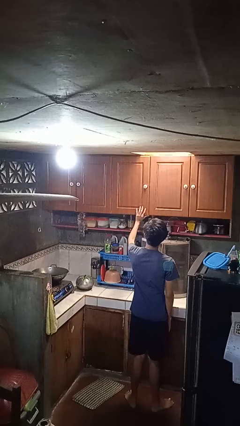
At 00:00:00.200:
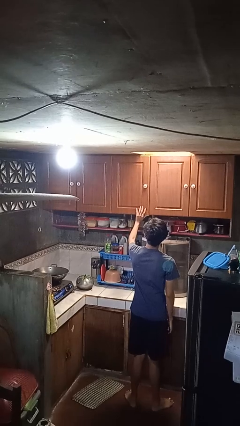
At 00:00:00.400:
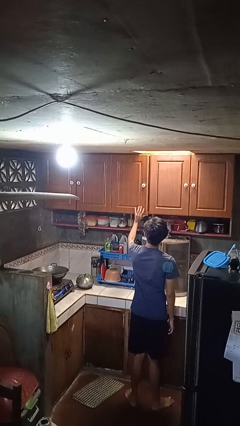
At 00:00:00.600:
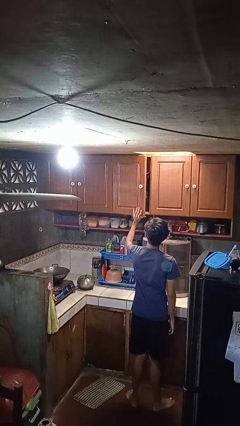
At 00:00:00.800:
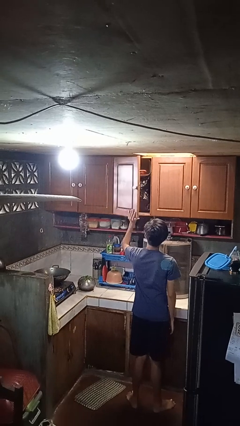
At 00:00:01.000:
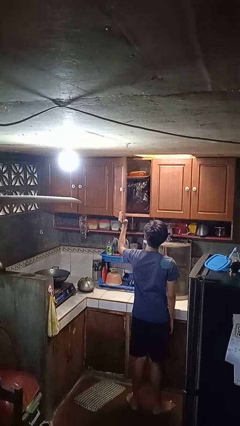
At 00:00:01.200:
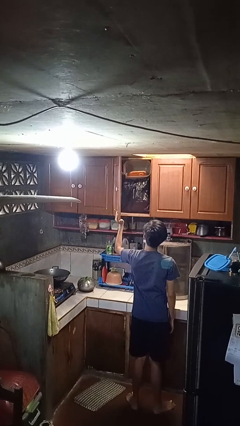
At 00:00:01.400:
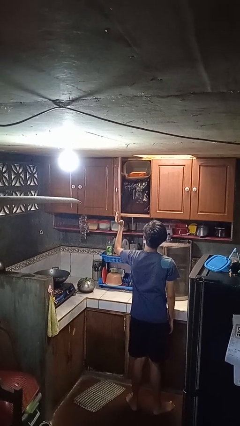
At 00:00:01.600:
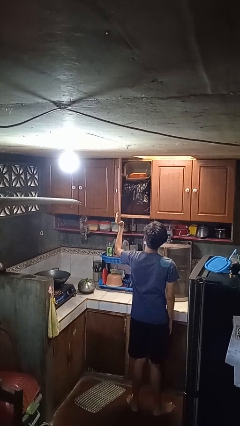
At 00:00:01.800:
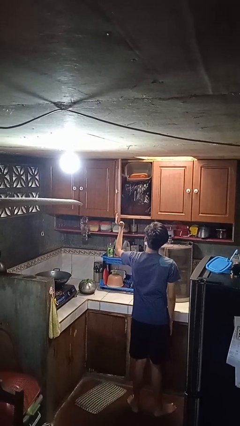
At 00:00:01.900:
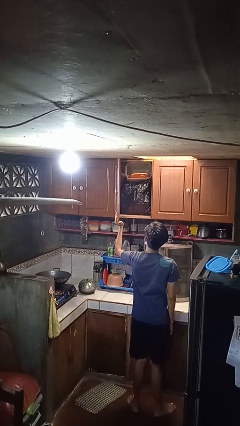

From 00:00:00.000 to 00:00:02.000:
person opens cabinet

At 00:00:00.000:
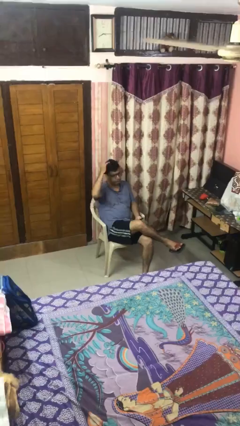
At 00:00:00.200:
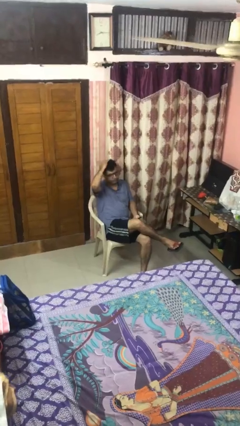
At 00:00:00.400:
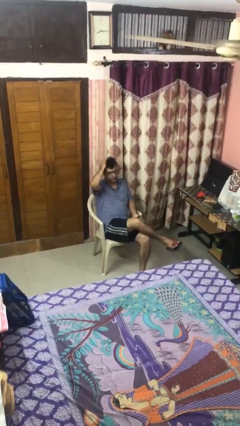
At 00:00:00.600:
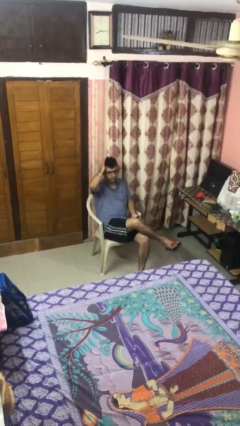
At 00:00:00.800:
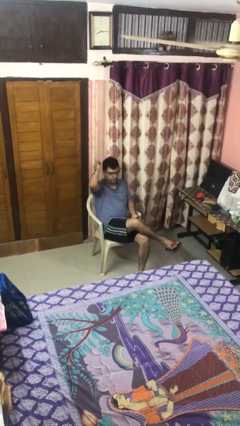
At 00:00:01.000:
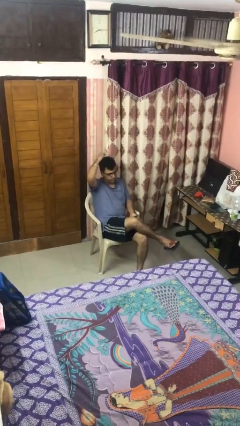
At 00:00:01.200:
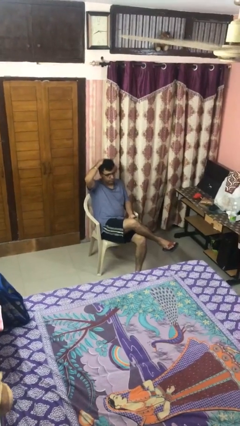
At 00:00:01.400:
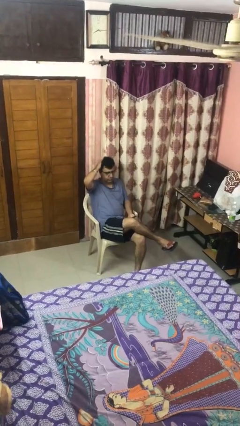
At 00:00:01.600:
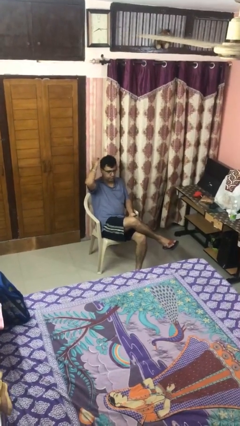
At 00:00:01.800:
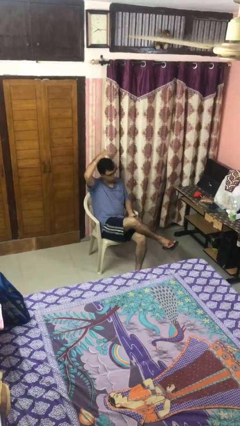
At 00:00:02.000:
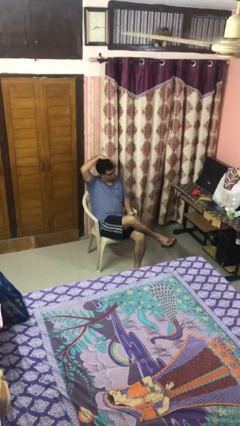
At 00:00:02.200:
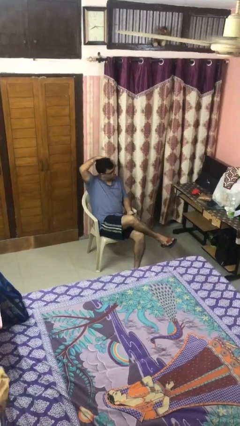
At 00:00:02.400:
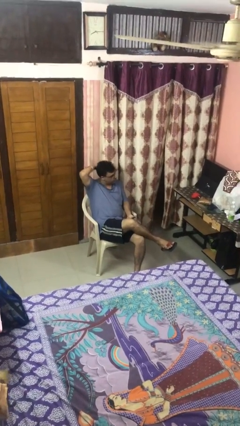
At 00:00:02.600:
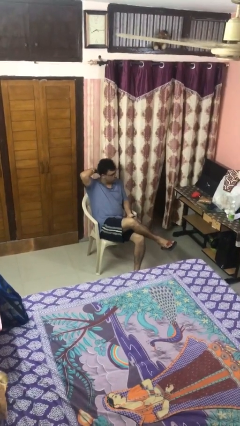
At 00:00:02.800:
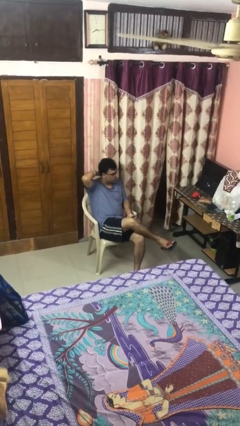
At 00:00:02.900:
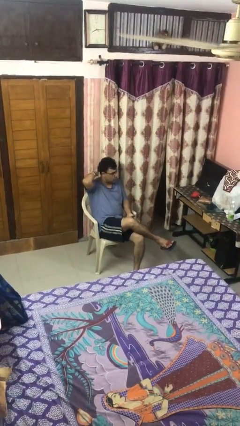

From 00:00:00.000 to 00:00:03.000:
person strokes hair

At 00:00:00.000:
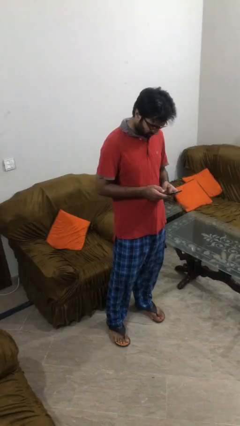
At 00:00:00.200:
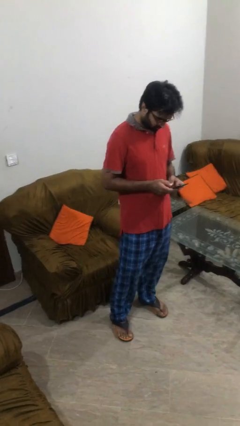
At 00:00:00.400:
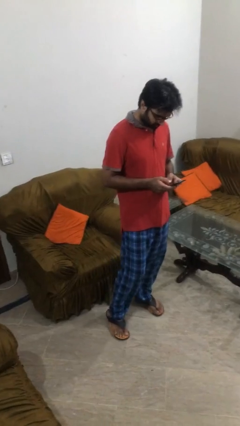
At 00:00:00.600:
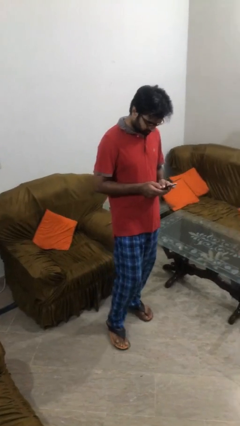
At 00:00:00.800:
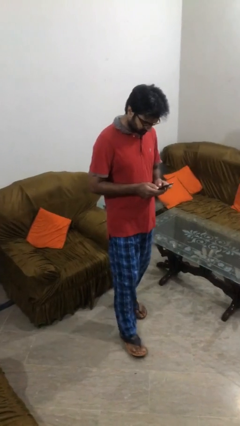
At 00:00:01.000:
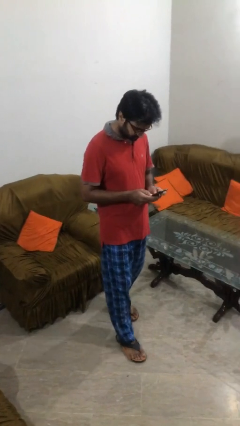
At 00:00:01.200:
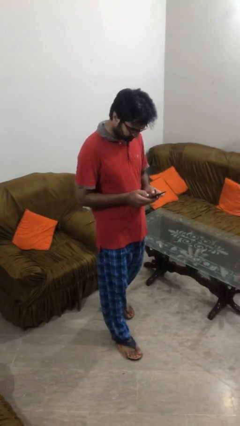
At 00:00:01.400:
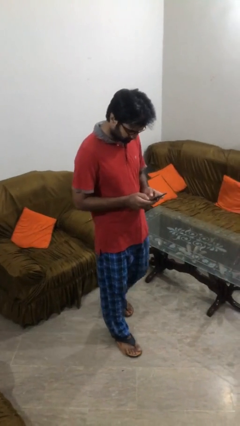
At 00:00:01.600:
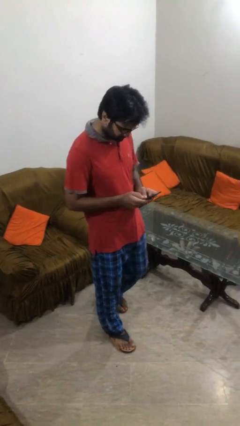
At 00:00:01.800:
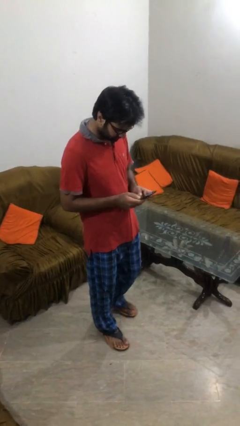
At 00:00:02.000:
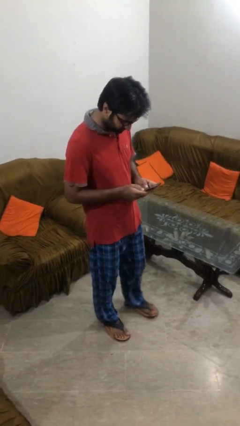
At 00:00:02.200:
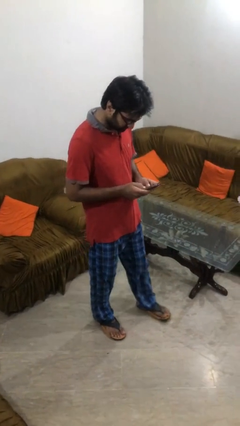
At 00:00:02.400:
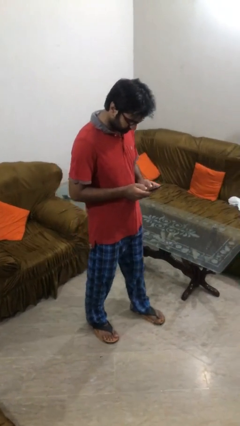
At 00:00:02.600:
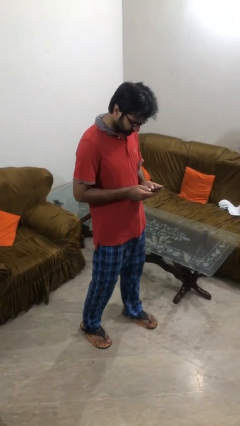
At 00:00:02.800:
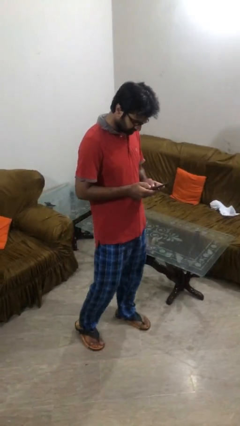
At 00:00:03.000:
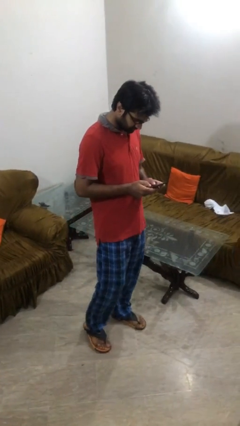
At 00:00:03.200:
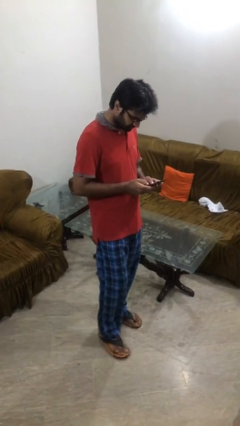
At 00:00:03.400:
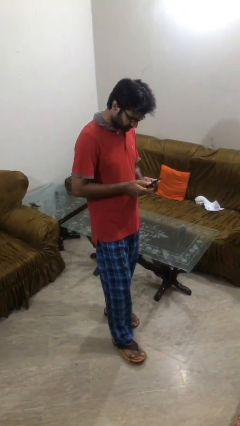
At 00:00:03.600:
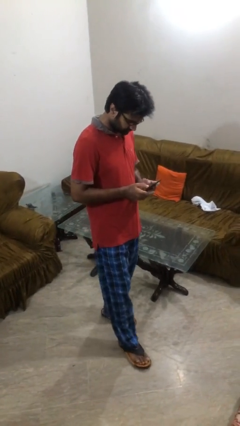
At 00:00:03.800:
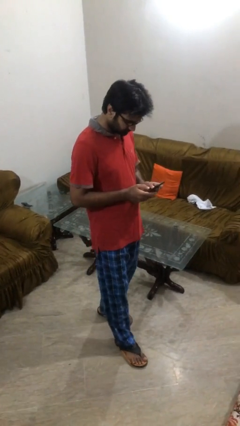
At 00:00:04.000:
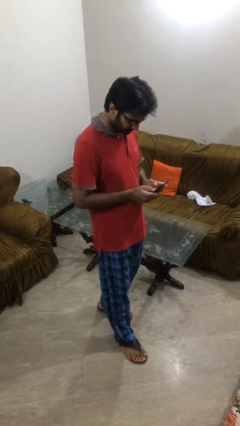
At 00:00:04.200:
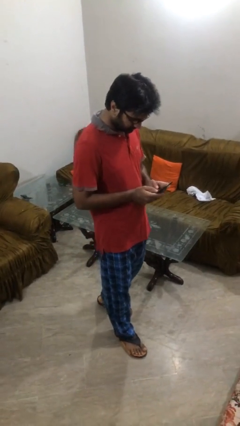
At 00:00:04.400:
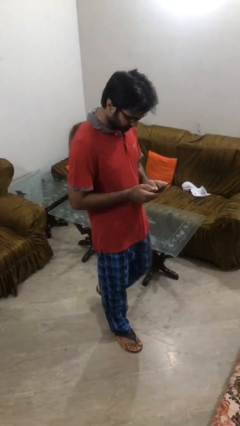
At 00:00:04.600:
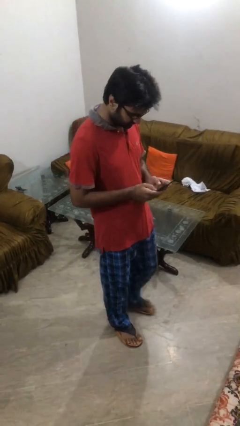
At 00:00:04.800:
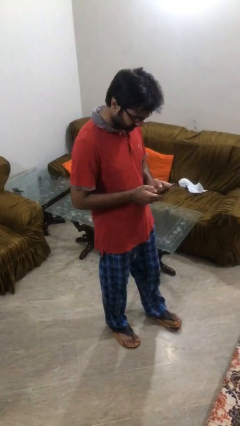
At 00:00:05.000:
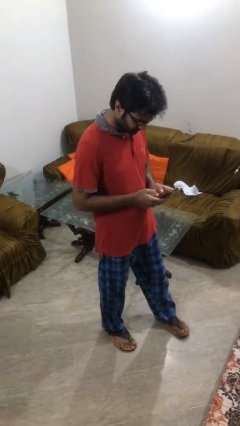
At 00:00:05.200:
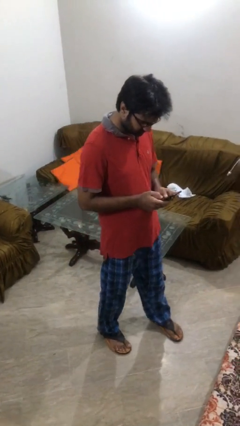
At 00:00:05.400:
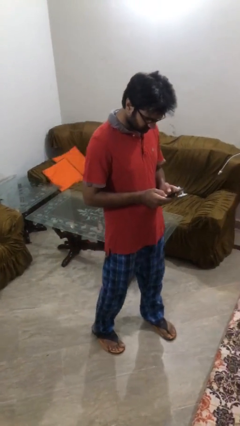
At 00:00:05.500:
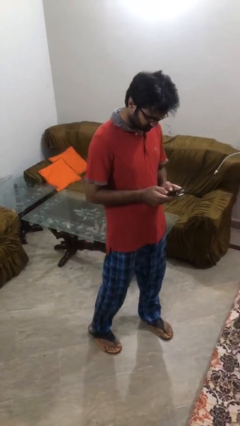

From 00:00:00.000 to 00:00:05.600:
person texts on phone

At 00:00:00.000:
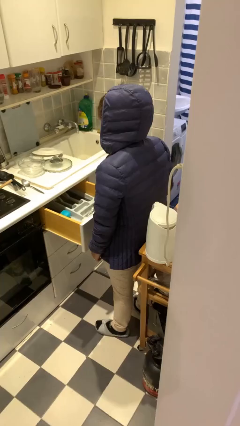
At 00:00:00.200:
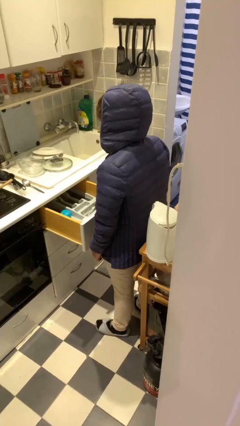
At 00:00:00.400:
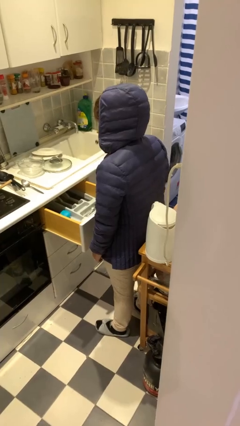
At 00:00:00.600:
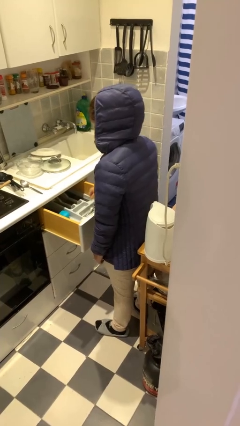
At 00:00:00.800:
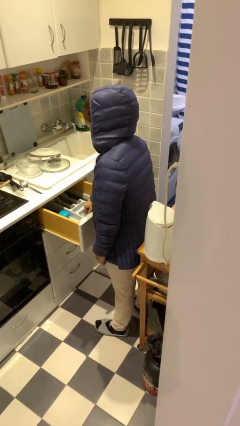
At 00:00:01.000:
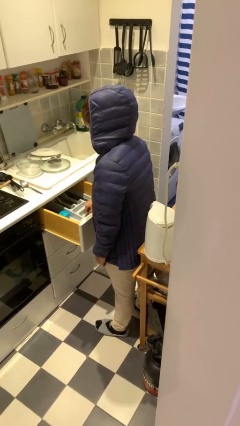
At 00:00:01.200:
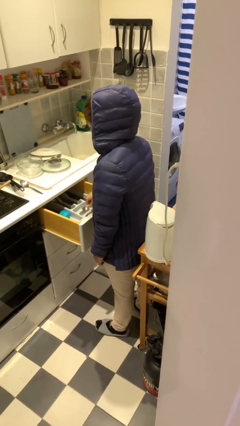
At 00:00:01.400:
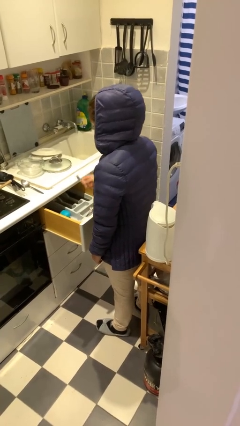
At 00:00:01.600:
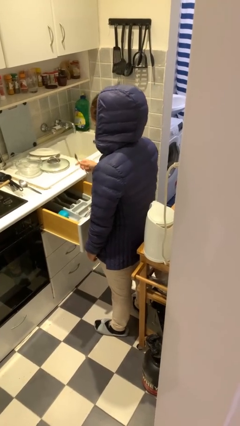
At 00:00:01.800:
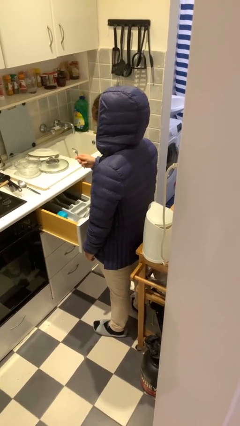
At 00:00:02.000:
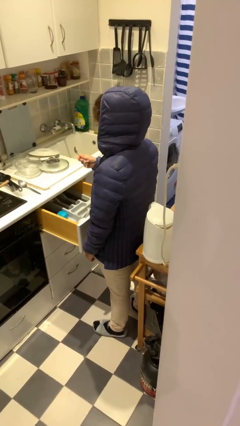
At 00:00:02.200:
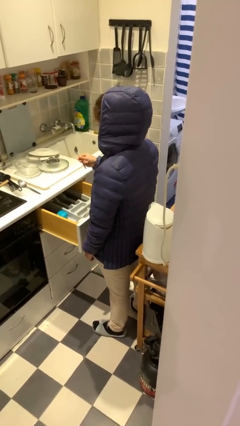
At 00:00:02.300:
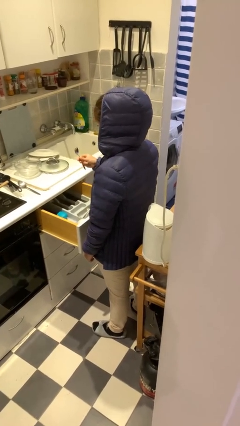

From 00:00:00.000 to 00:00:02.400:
person takes object from kitchen drawer

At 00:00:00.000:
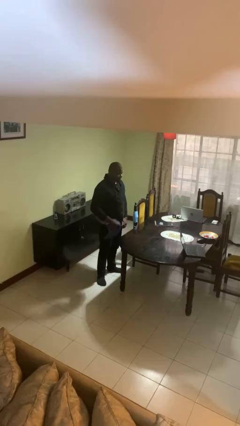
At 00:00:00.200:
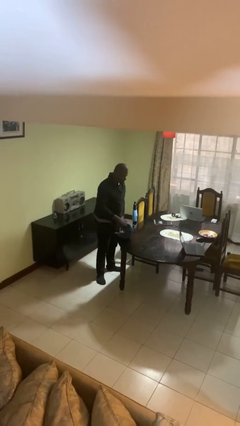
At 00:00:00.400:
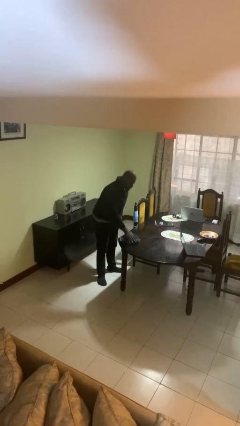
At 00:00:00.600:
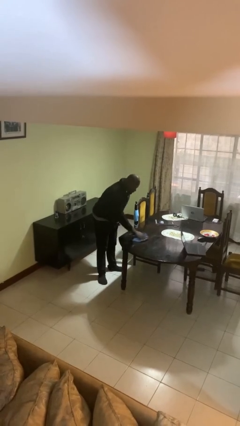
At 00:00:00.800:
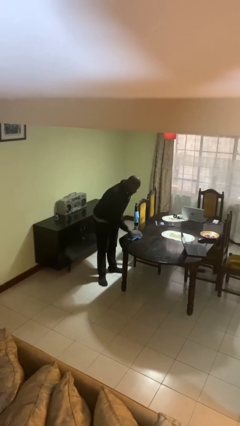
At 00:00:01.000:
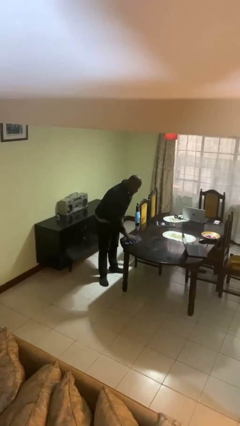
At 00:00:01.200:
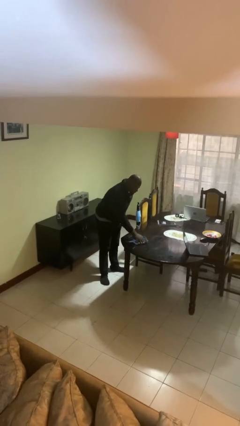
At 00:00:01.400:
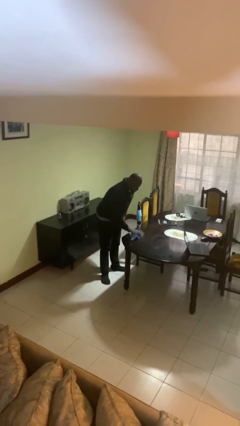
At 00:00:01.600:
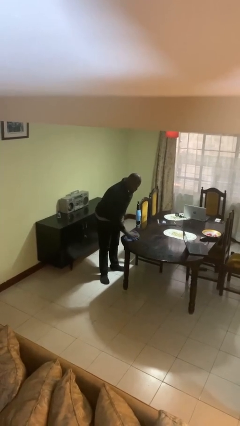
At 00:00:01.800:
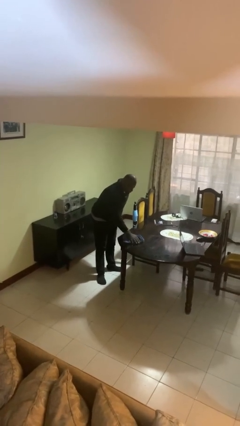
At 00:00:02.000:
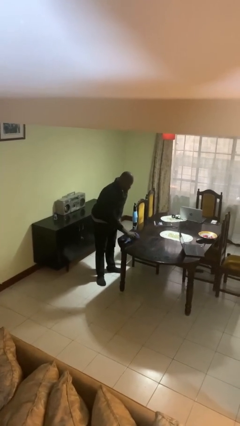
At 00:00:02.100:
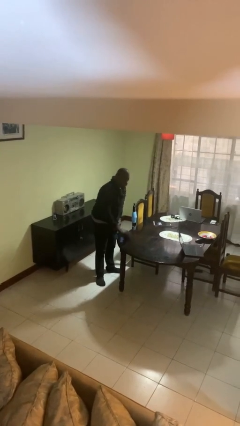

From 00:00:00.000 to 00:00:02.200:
person cleans table with rag

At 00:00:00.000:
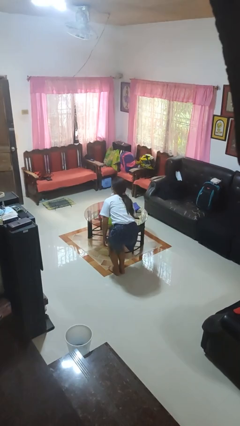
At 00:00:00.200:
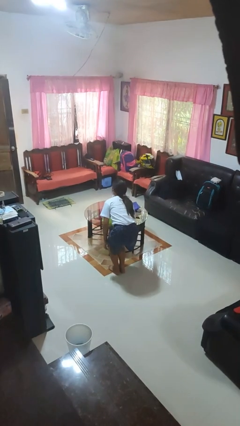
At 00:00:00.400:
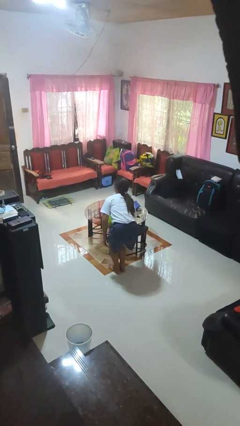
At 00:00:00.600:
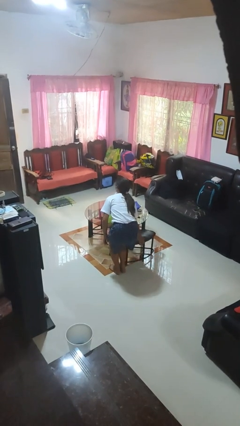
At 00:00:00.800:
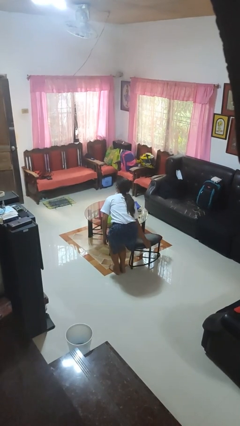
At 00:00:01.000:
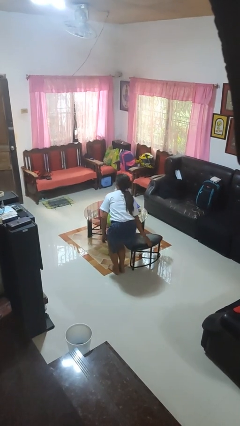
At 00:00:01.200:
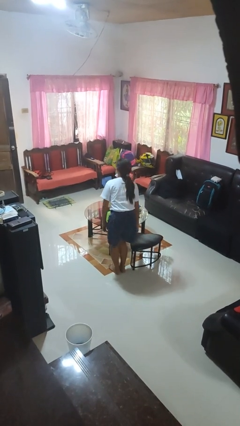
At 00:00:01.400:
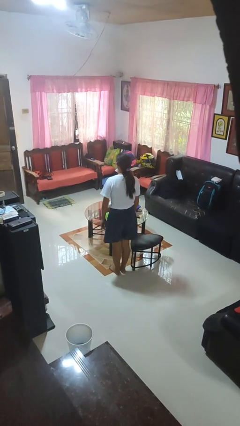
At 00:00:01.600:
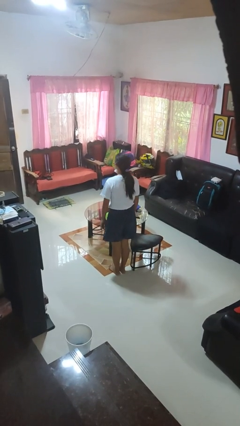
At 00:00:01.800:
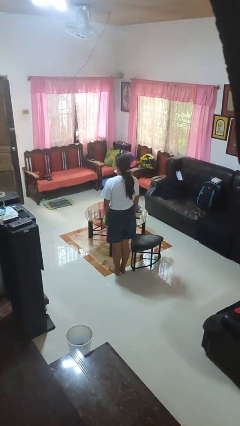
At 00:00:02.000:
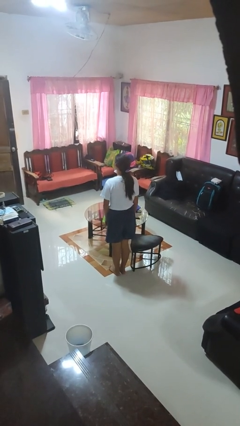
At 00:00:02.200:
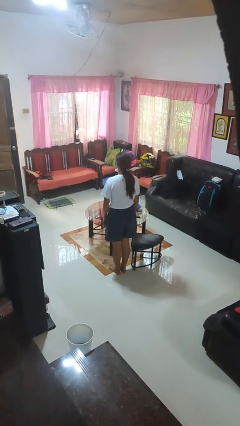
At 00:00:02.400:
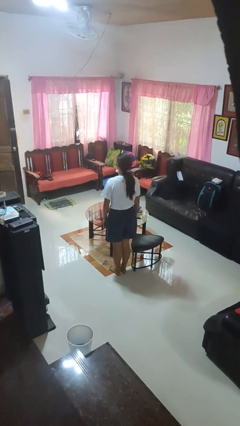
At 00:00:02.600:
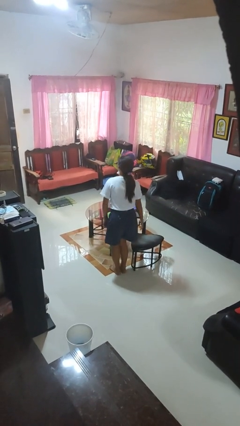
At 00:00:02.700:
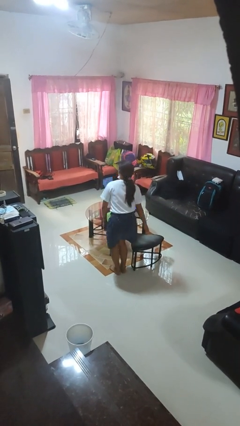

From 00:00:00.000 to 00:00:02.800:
person pulls out chair
